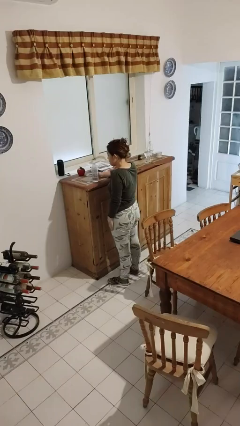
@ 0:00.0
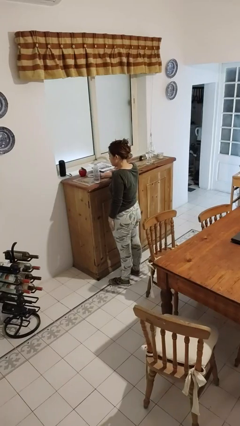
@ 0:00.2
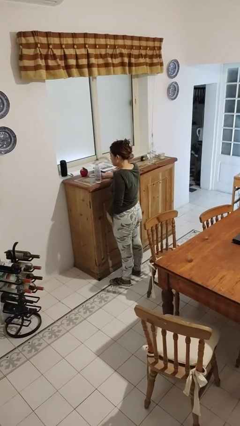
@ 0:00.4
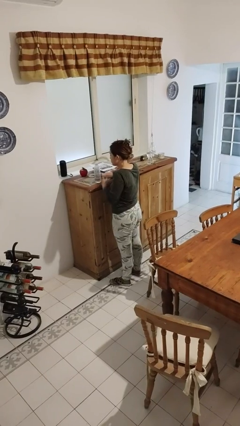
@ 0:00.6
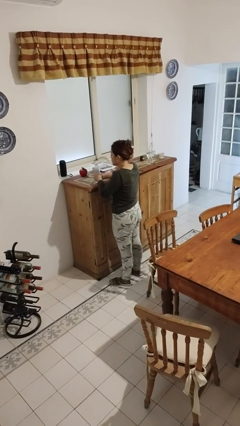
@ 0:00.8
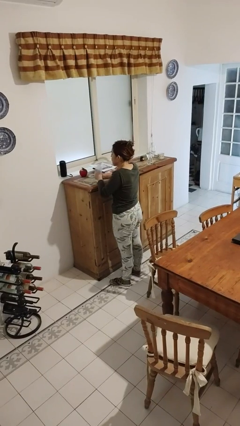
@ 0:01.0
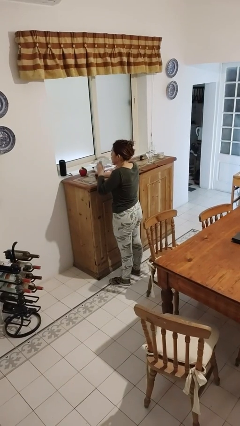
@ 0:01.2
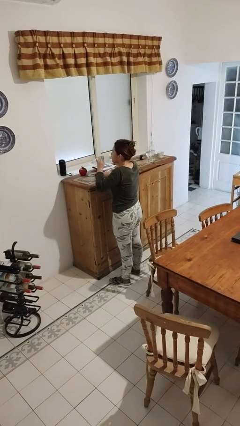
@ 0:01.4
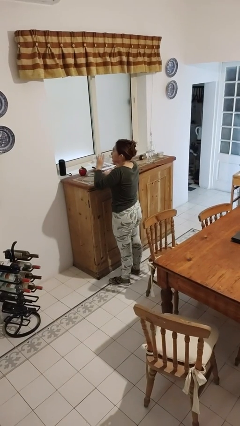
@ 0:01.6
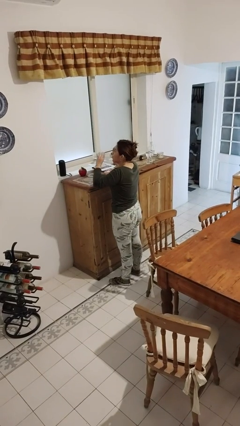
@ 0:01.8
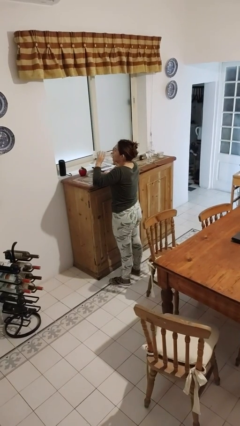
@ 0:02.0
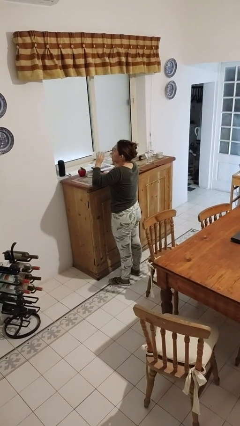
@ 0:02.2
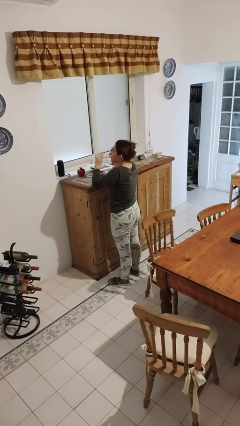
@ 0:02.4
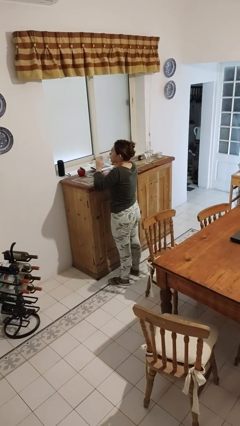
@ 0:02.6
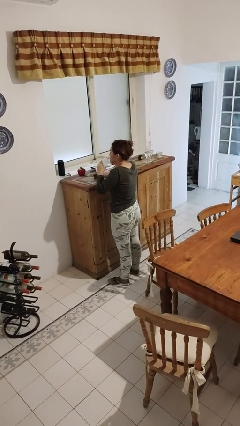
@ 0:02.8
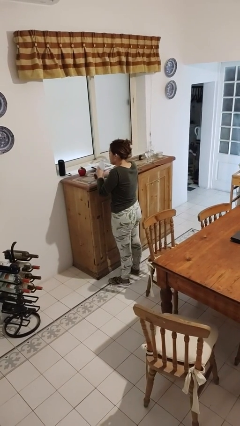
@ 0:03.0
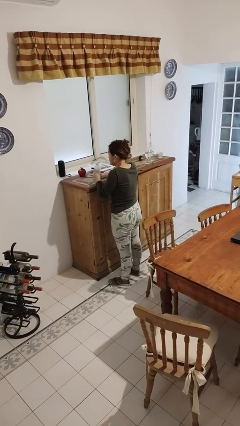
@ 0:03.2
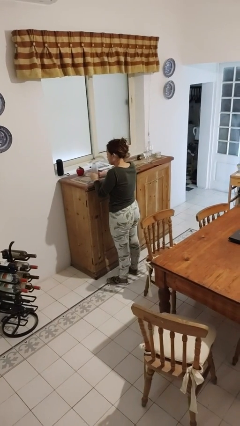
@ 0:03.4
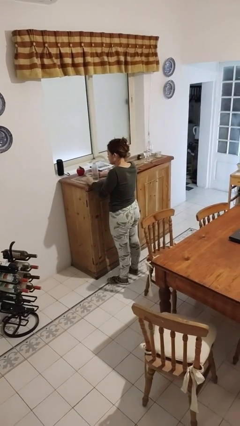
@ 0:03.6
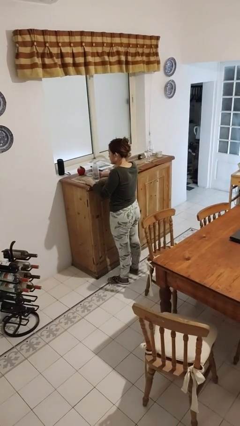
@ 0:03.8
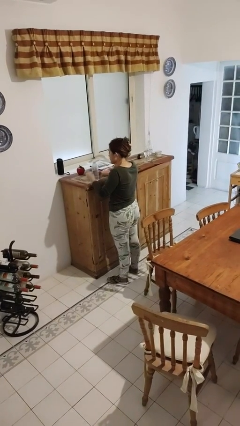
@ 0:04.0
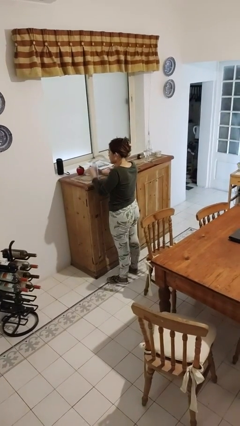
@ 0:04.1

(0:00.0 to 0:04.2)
person drinks from bottle

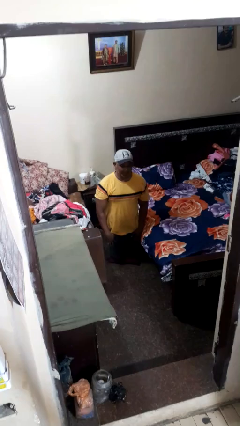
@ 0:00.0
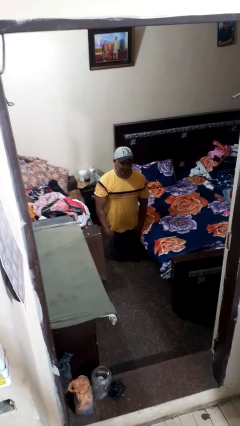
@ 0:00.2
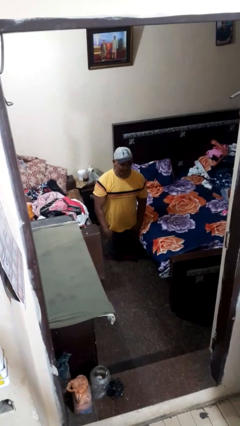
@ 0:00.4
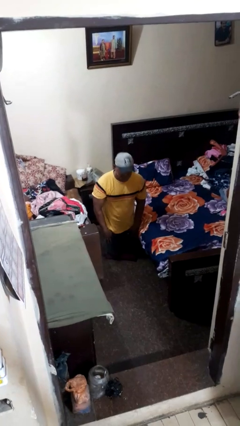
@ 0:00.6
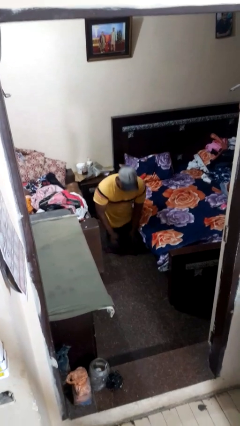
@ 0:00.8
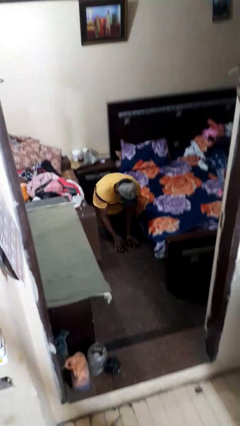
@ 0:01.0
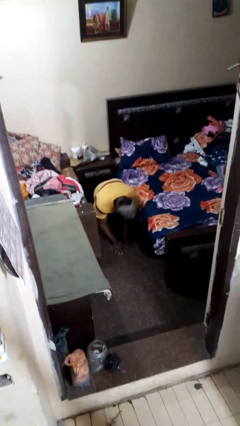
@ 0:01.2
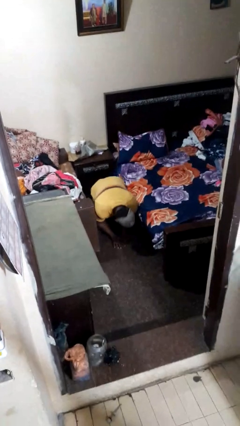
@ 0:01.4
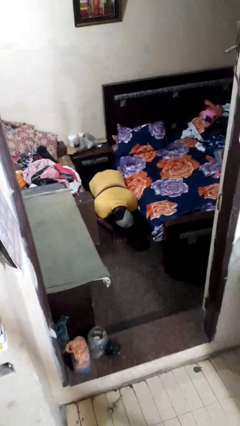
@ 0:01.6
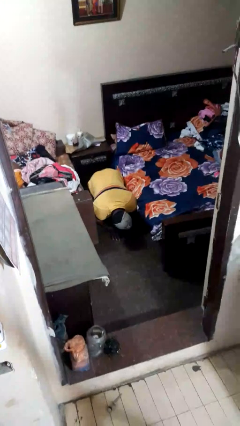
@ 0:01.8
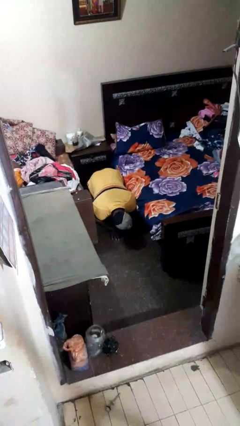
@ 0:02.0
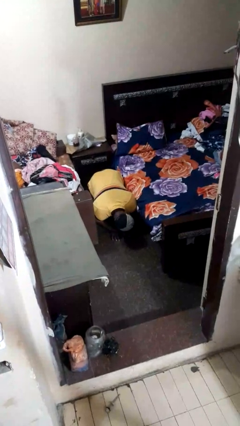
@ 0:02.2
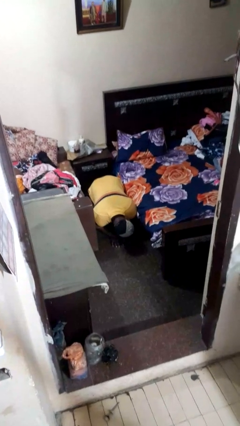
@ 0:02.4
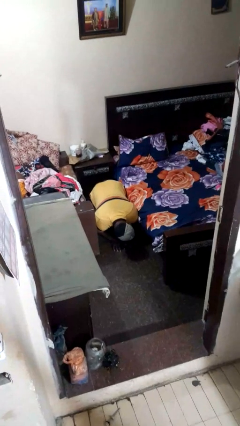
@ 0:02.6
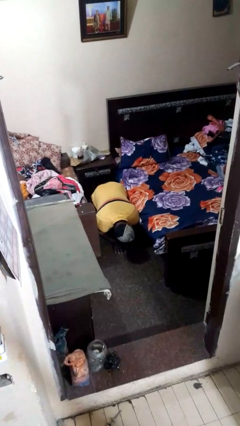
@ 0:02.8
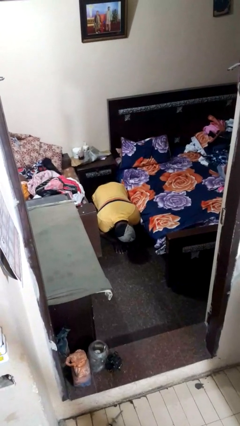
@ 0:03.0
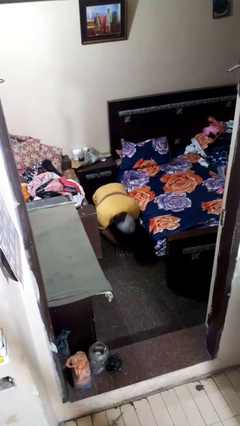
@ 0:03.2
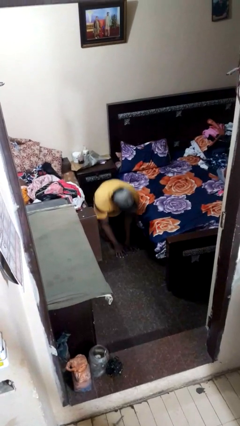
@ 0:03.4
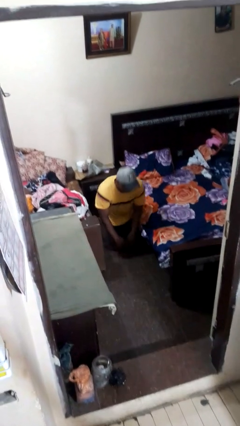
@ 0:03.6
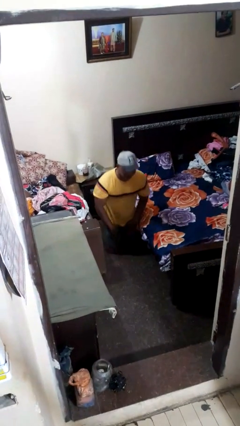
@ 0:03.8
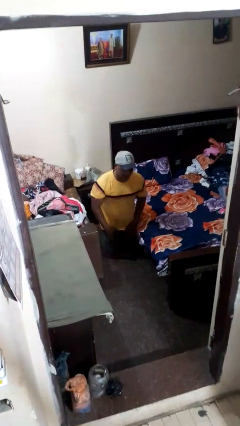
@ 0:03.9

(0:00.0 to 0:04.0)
person searches under bed

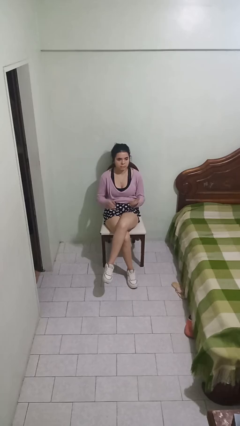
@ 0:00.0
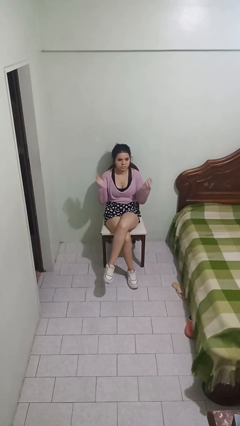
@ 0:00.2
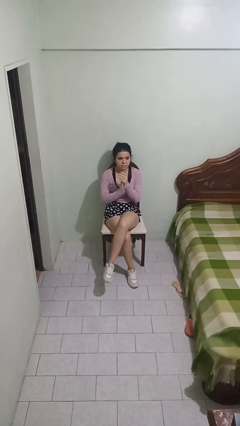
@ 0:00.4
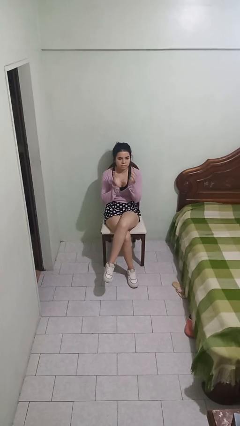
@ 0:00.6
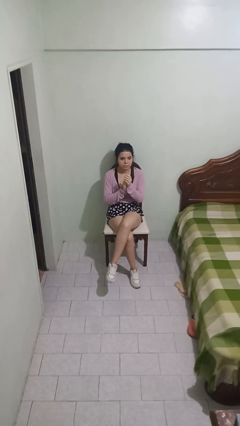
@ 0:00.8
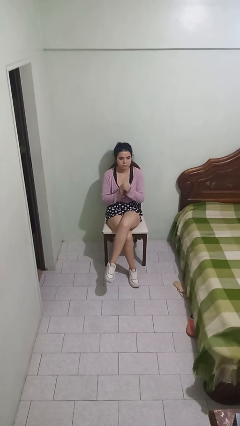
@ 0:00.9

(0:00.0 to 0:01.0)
person claps hands

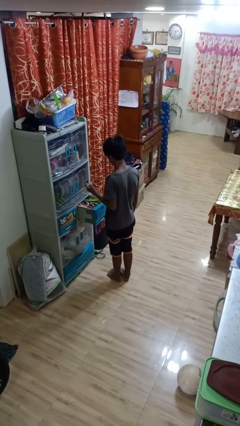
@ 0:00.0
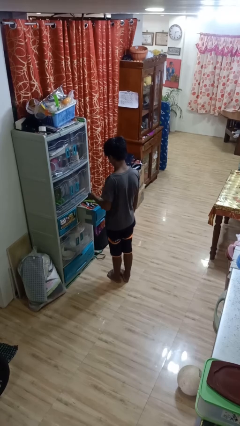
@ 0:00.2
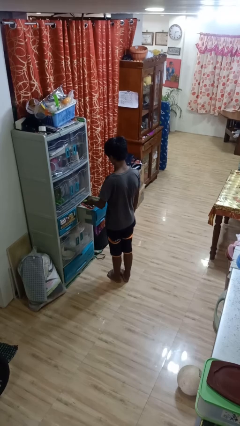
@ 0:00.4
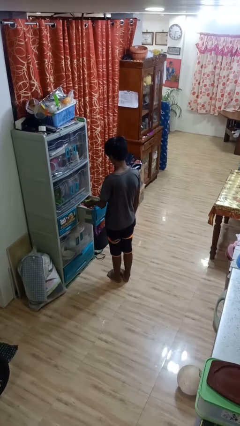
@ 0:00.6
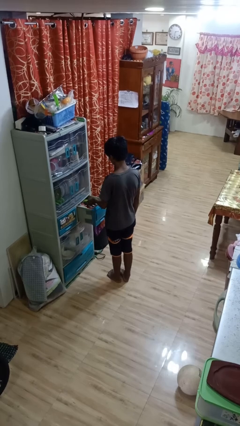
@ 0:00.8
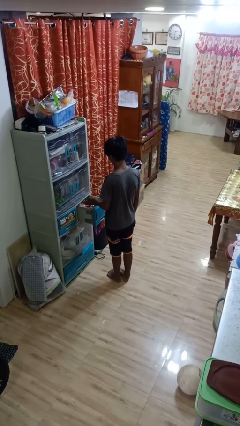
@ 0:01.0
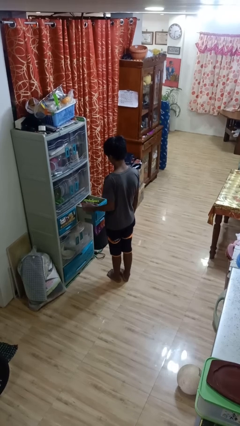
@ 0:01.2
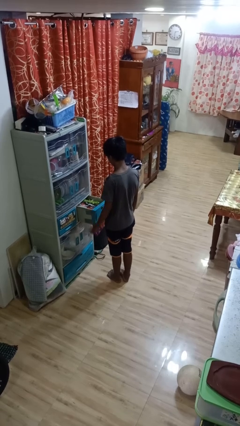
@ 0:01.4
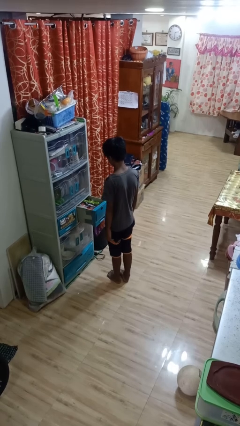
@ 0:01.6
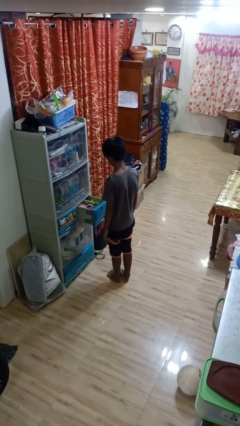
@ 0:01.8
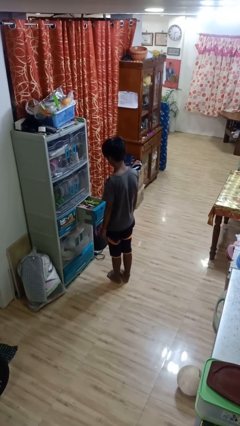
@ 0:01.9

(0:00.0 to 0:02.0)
person puts object into kitchen drawer

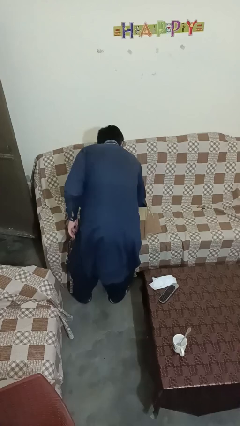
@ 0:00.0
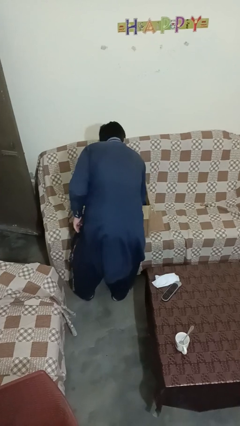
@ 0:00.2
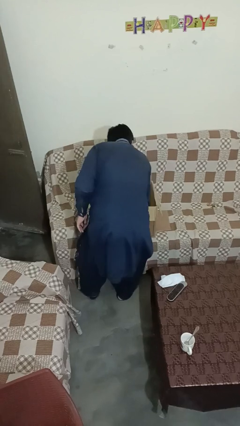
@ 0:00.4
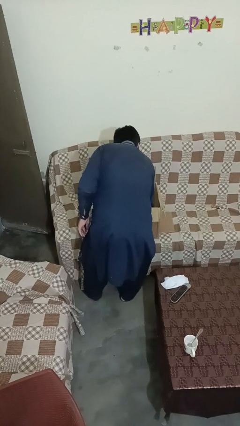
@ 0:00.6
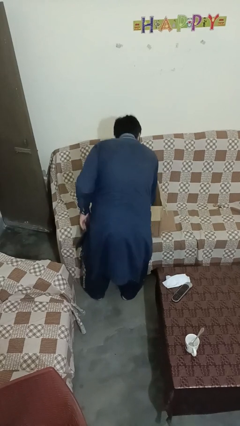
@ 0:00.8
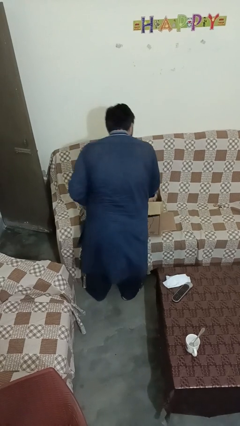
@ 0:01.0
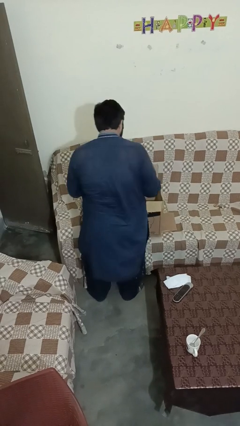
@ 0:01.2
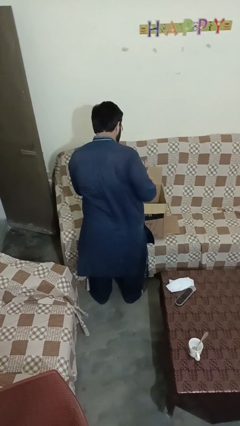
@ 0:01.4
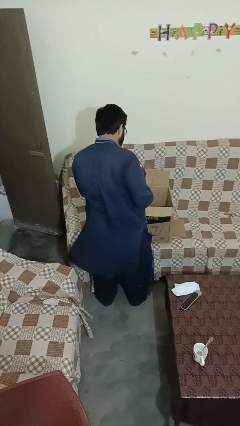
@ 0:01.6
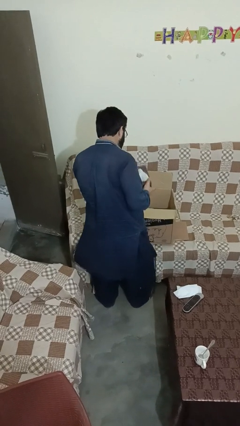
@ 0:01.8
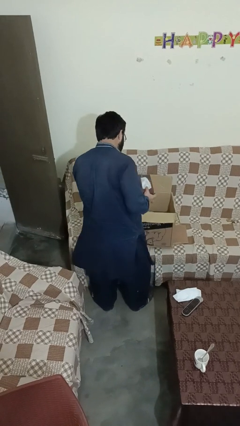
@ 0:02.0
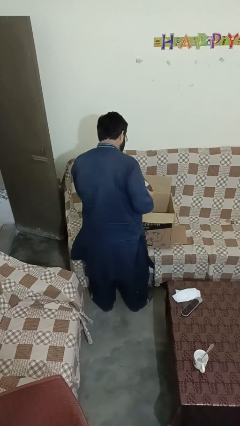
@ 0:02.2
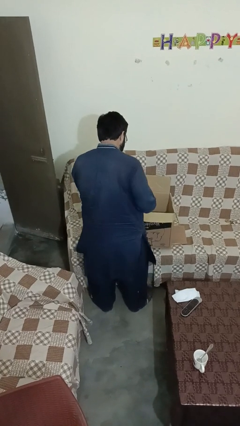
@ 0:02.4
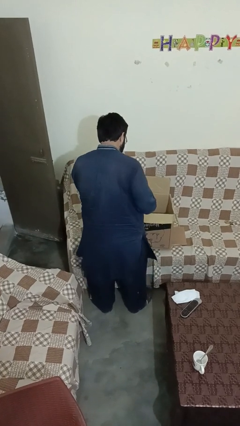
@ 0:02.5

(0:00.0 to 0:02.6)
person searches in box

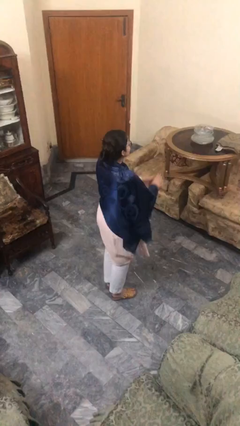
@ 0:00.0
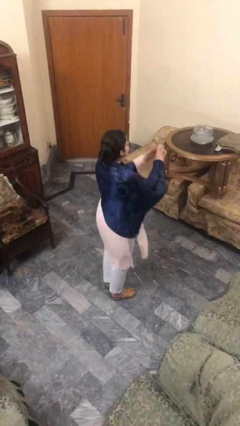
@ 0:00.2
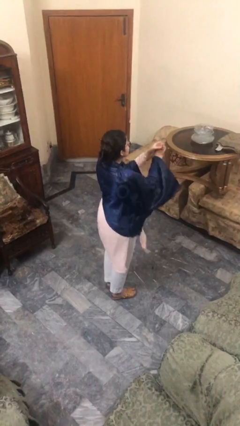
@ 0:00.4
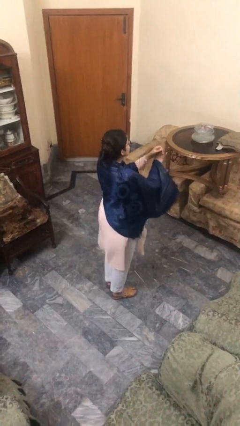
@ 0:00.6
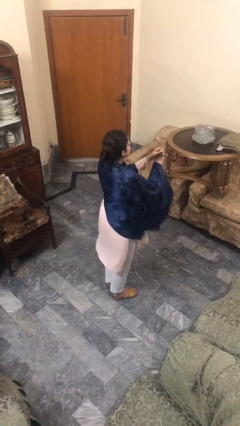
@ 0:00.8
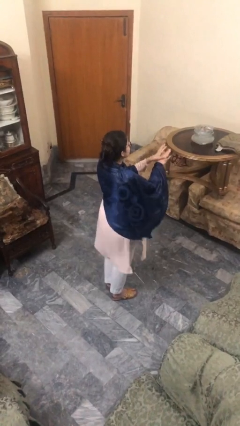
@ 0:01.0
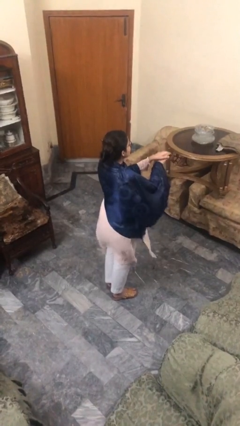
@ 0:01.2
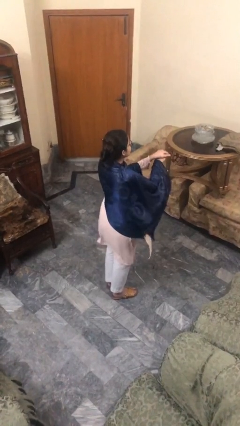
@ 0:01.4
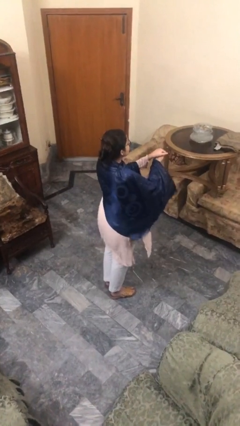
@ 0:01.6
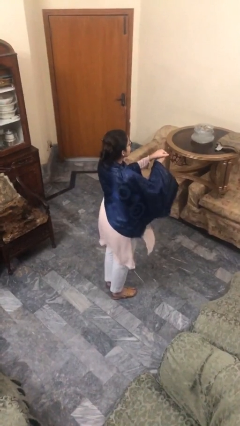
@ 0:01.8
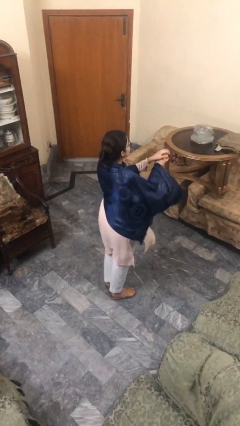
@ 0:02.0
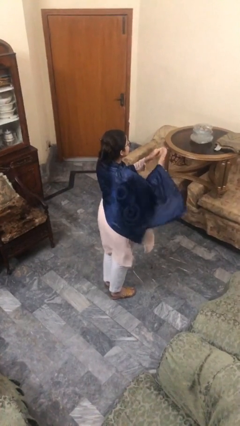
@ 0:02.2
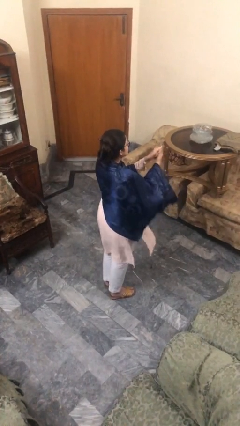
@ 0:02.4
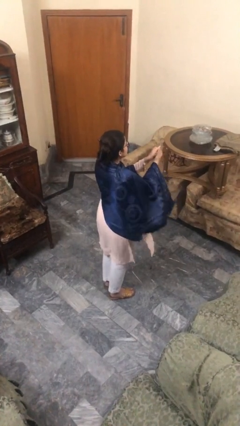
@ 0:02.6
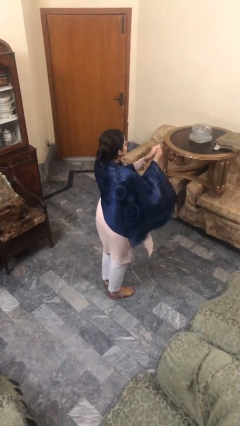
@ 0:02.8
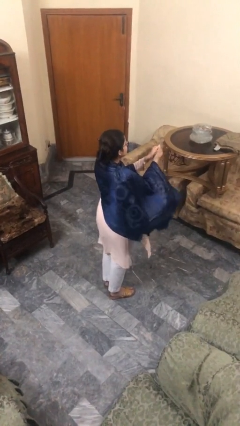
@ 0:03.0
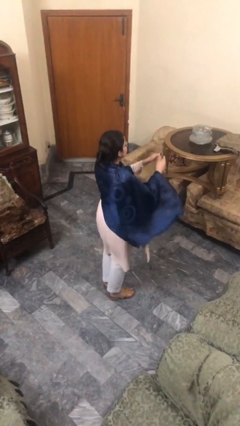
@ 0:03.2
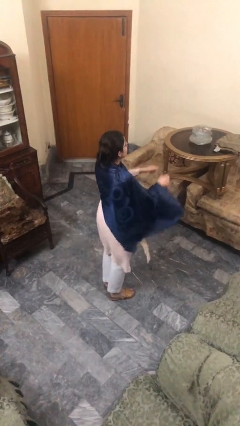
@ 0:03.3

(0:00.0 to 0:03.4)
person cracks knuckles

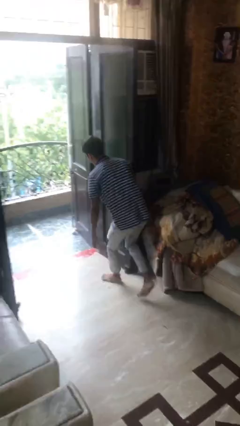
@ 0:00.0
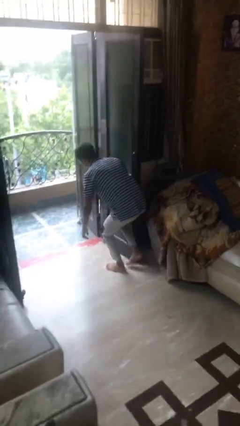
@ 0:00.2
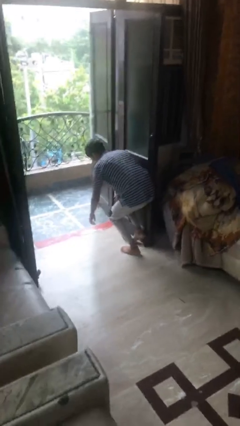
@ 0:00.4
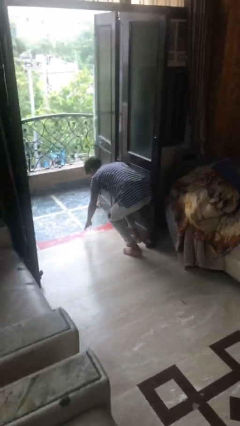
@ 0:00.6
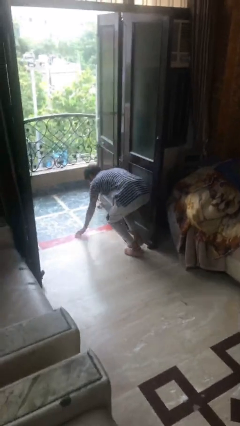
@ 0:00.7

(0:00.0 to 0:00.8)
person trips on object on floor
